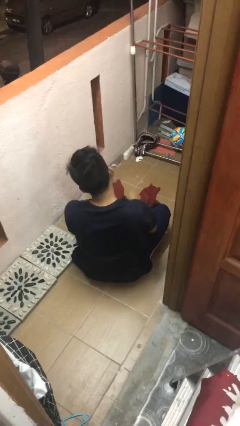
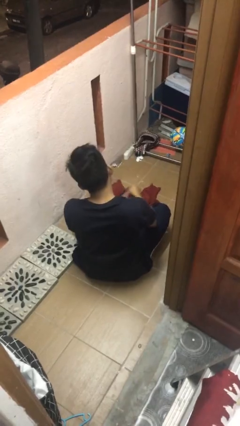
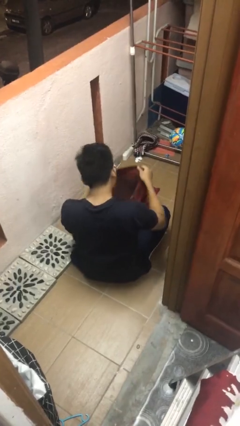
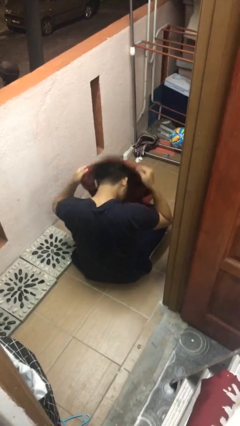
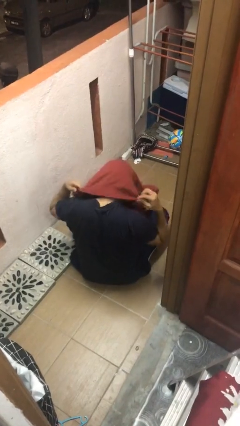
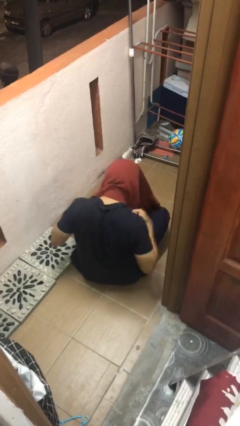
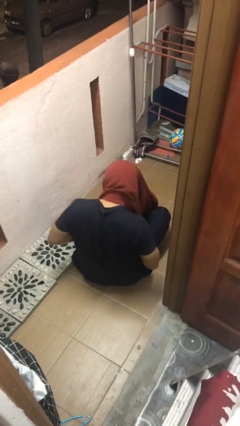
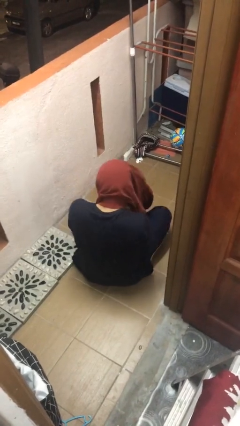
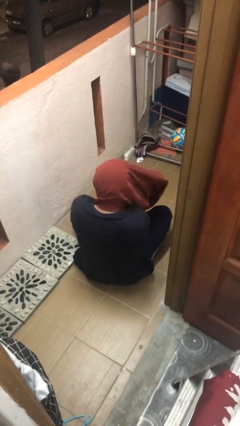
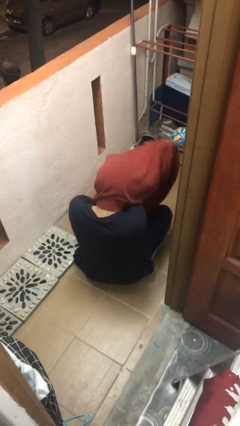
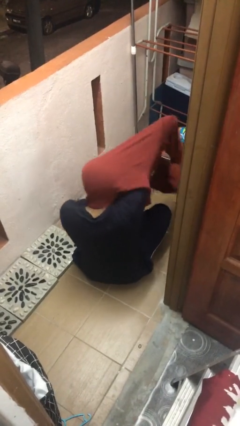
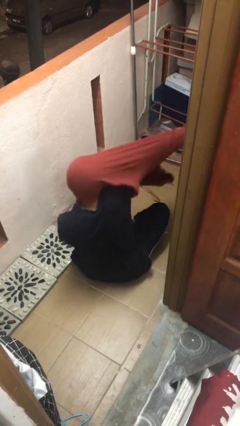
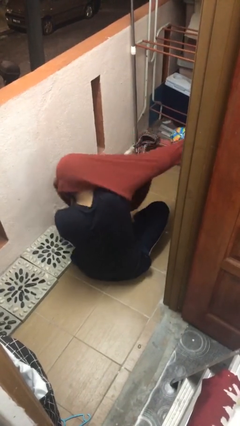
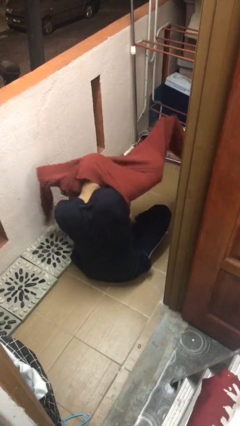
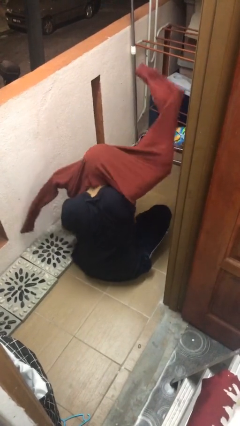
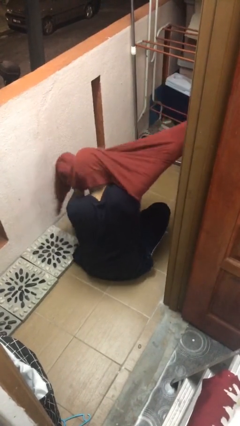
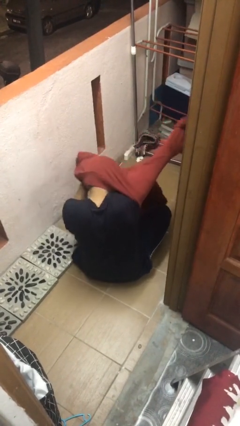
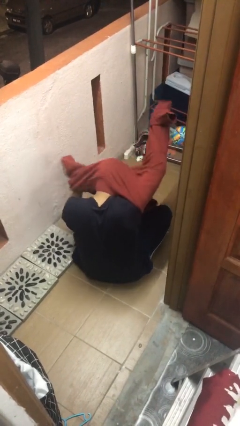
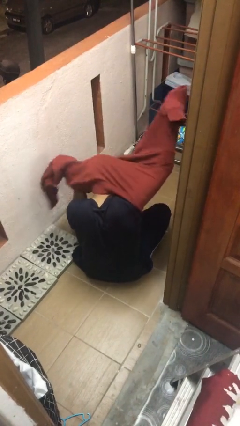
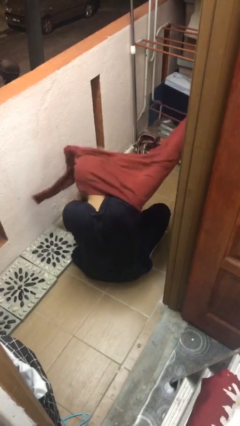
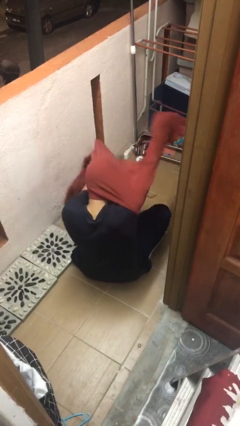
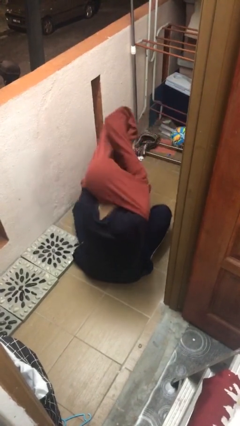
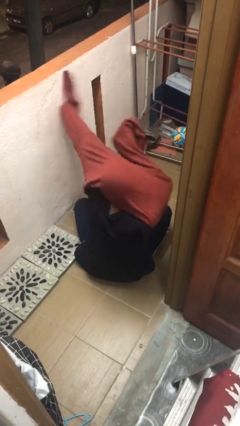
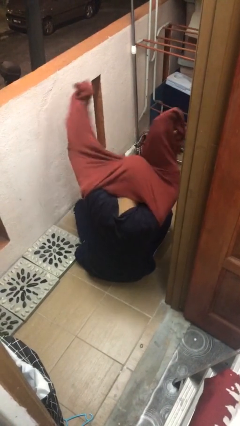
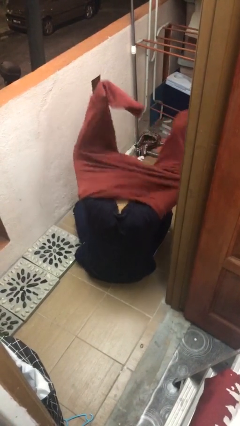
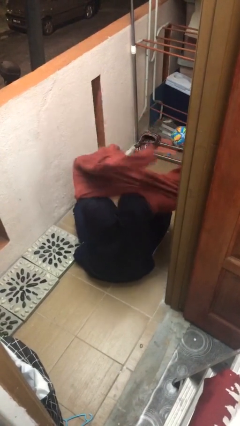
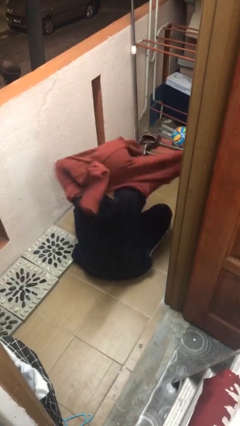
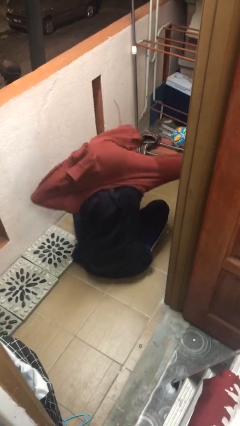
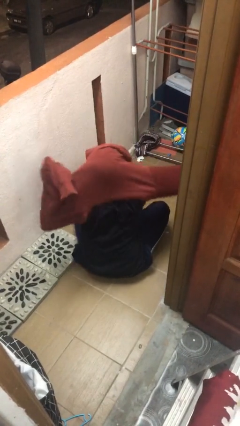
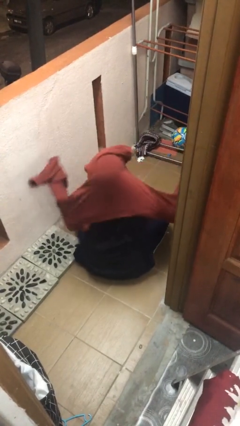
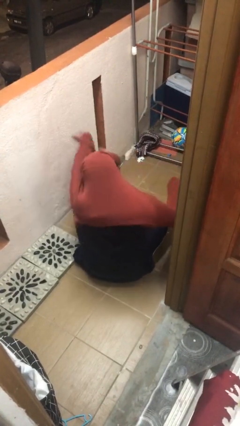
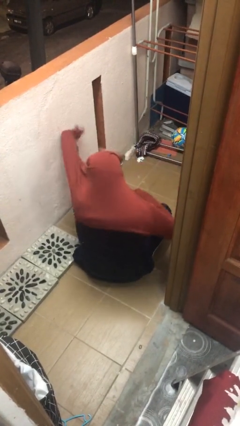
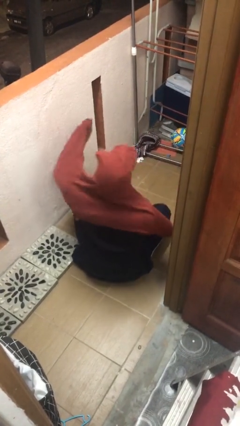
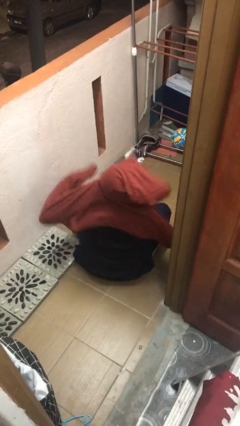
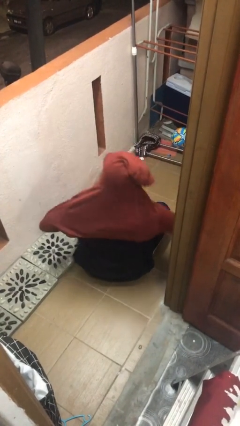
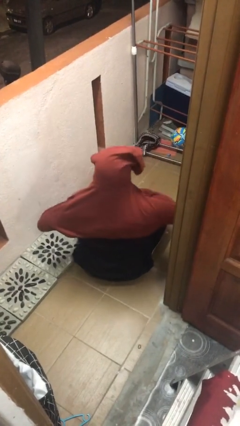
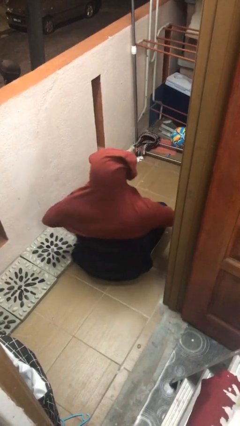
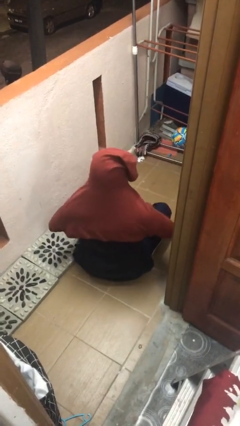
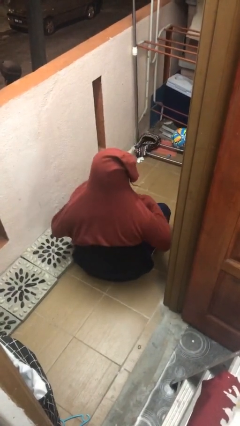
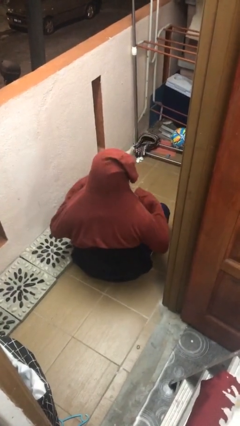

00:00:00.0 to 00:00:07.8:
person puts on hoodie

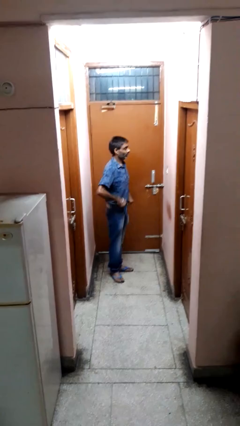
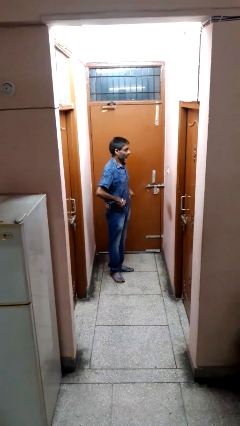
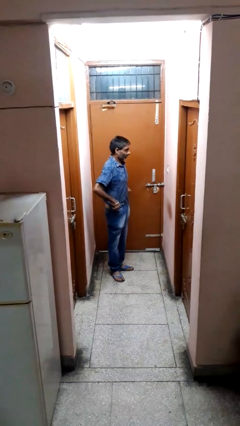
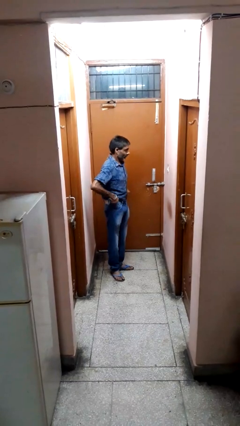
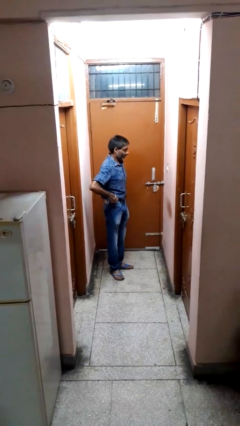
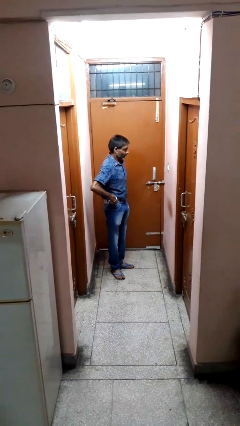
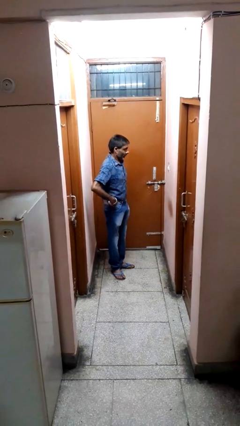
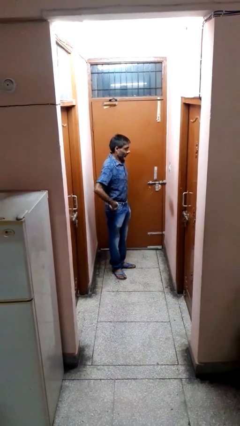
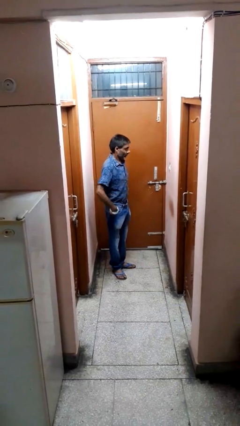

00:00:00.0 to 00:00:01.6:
person hikes up pants

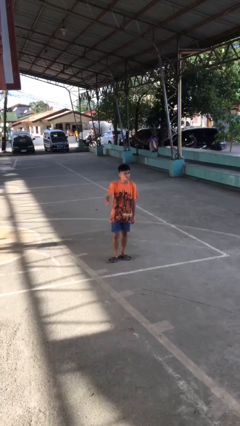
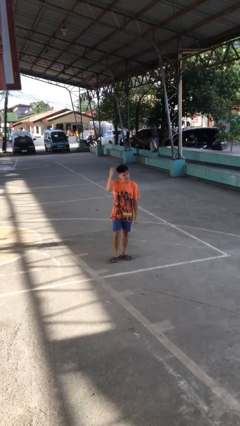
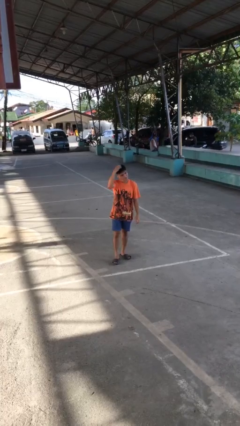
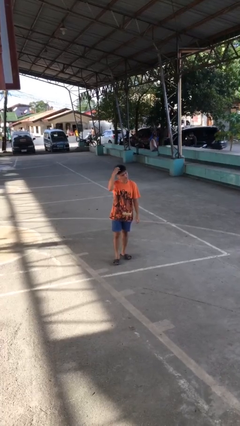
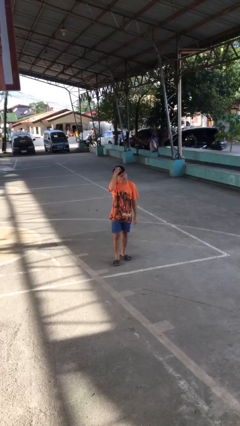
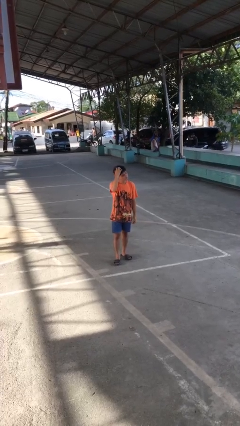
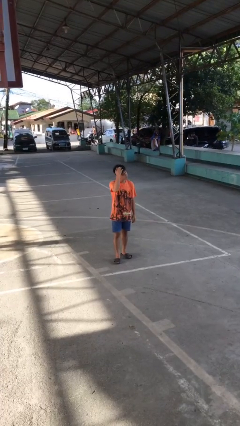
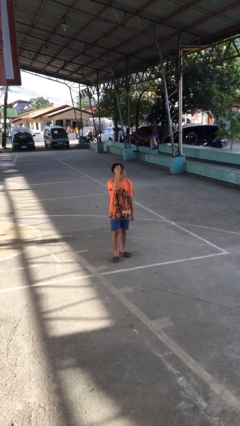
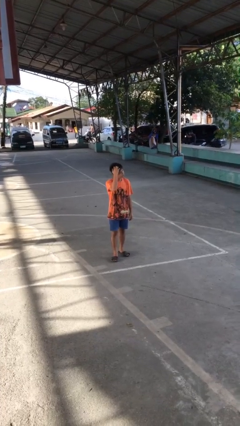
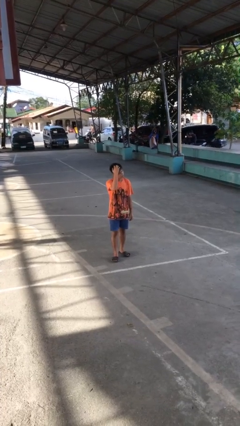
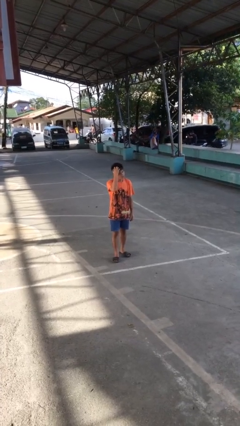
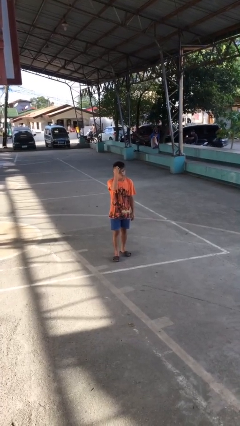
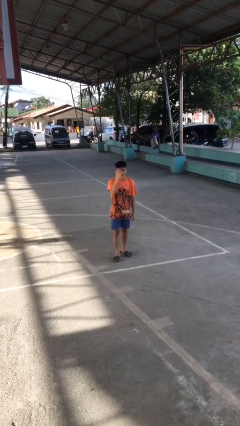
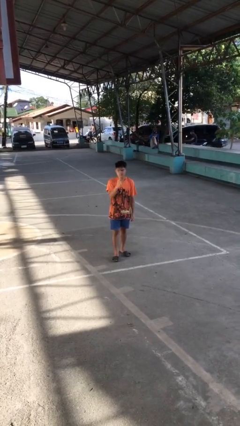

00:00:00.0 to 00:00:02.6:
person scratches face

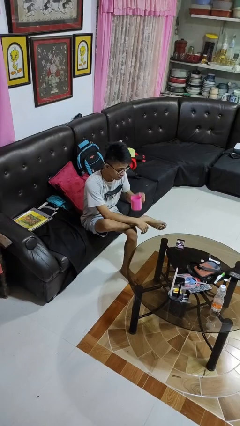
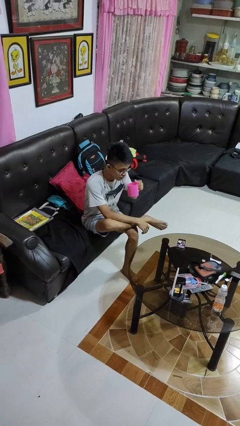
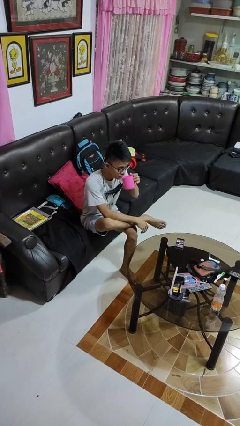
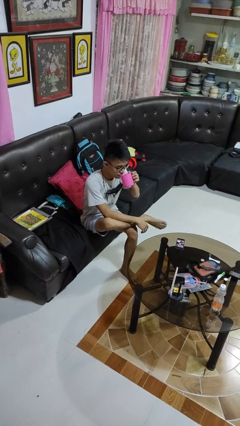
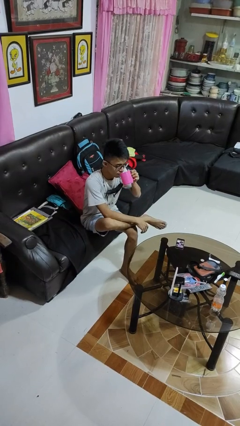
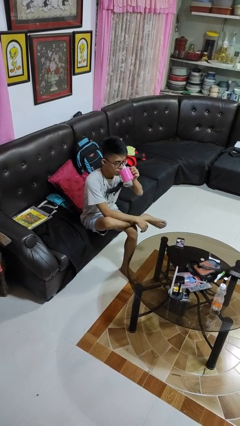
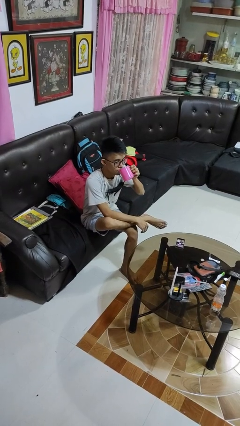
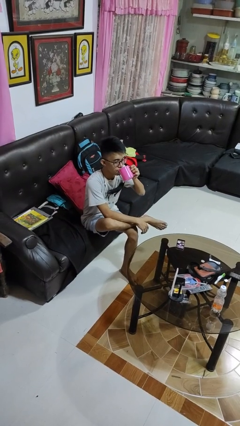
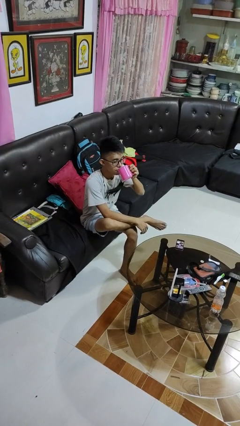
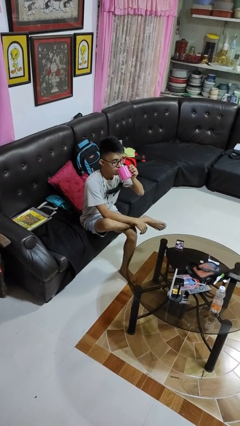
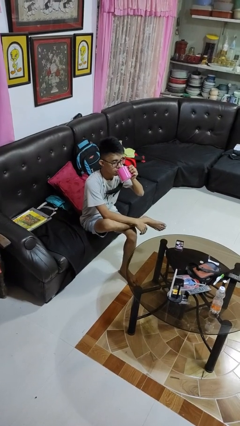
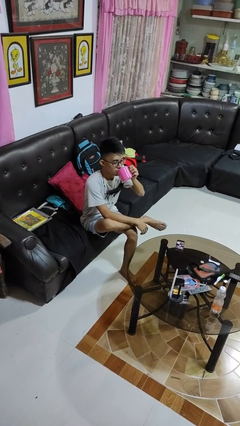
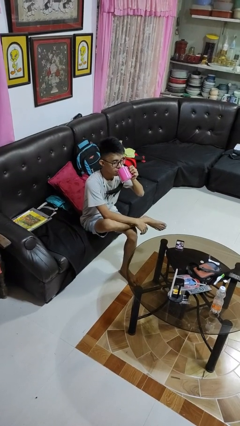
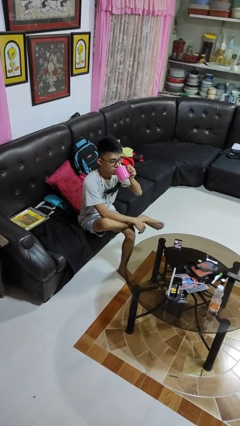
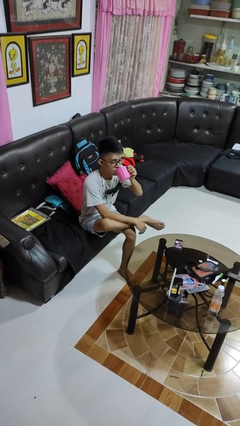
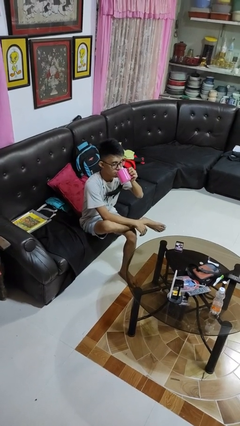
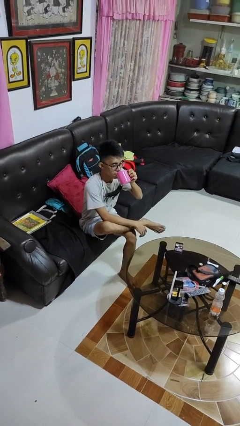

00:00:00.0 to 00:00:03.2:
person drinks from mug

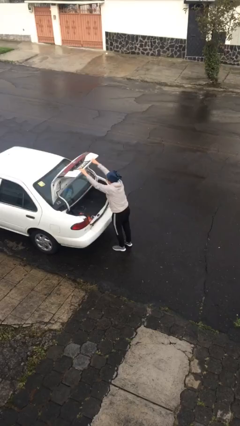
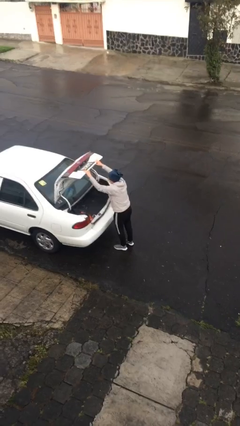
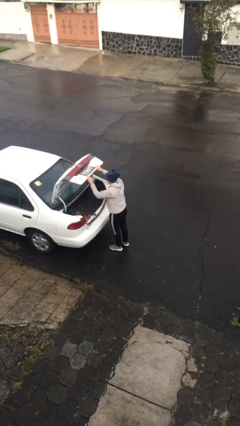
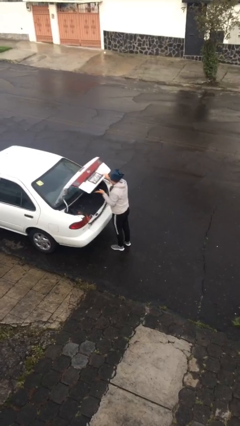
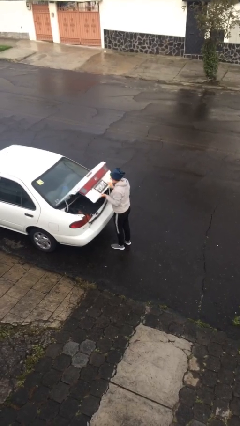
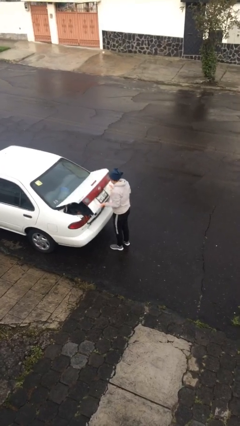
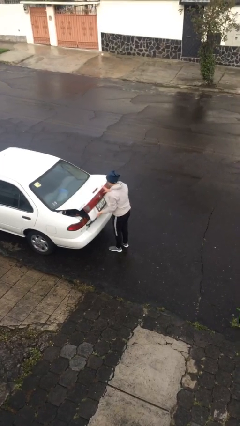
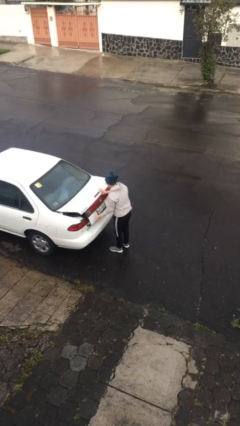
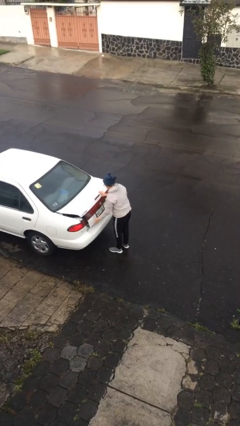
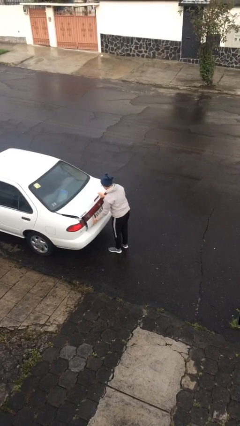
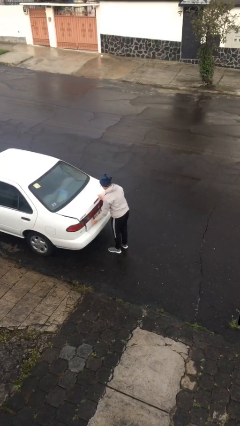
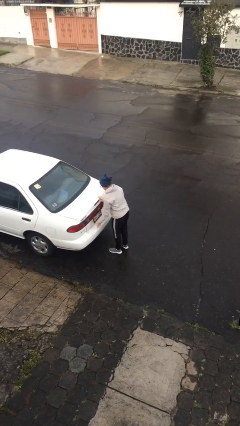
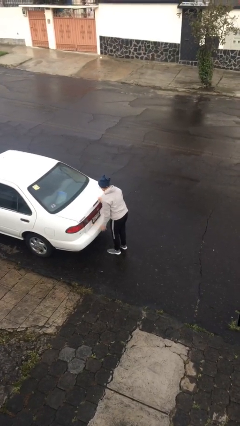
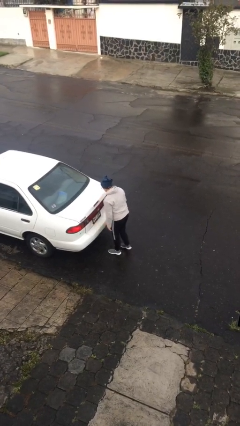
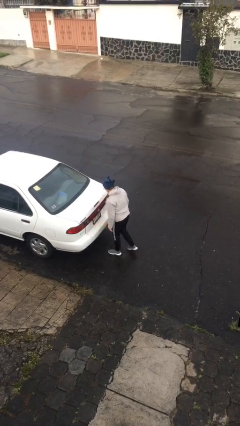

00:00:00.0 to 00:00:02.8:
person closes car trunk
